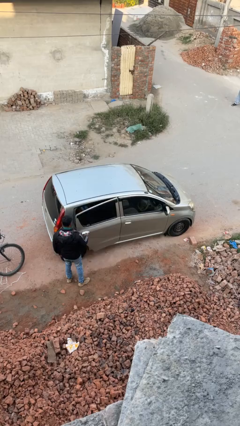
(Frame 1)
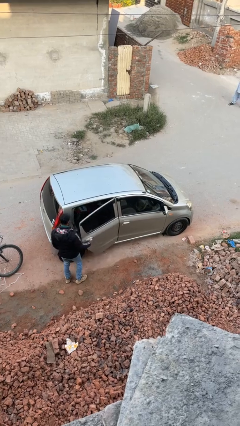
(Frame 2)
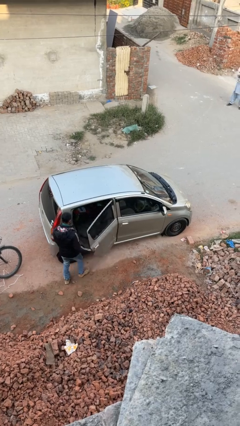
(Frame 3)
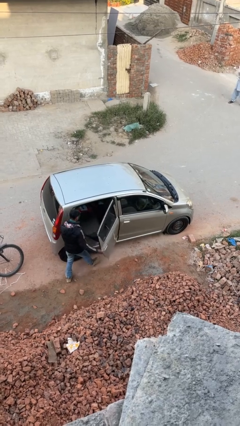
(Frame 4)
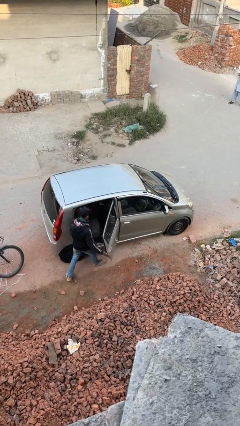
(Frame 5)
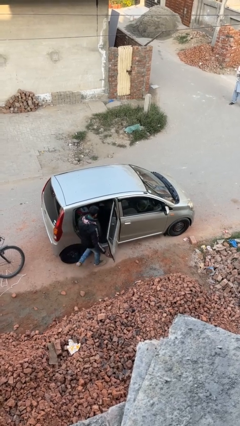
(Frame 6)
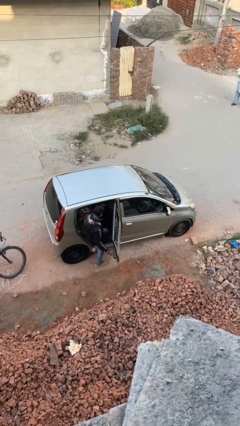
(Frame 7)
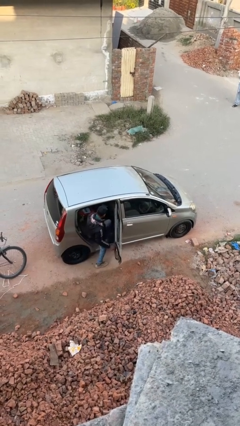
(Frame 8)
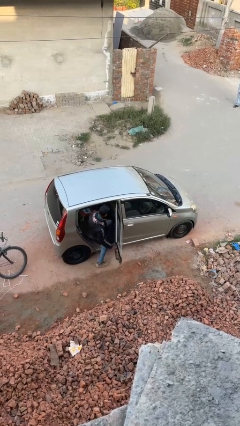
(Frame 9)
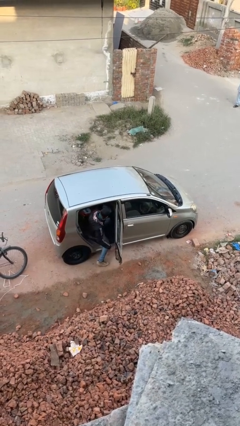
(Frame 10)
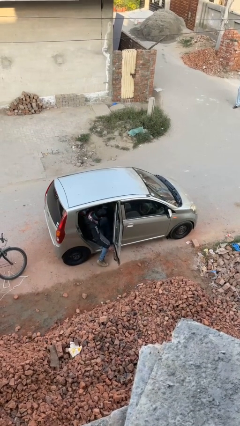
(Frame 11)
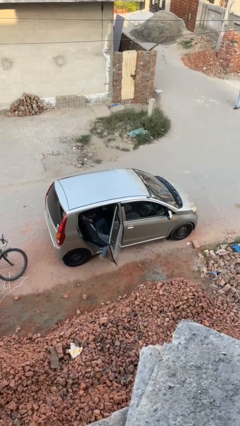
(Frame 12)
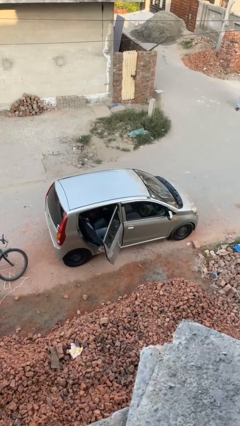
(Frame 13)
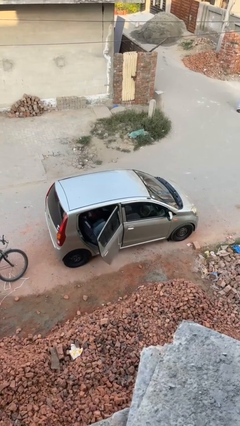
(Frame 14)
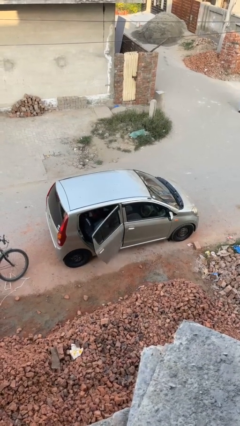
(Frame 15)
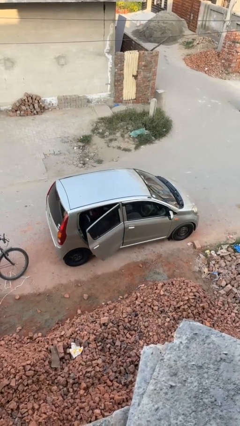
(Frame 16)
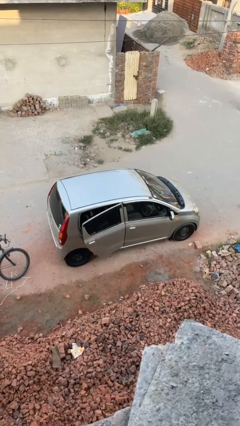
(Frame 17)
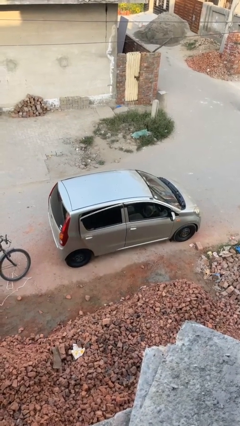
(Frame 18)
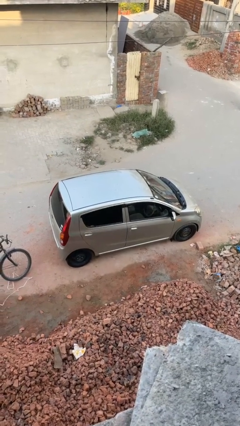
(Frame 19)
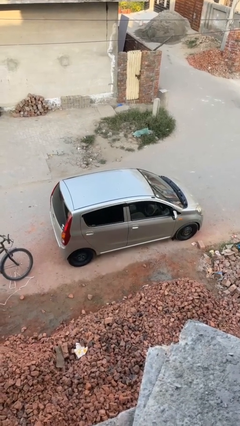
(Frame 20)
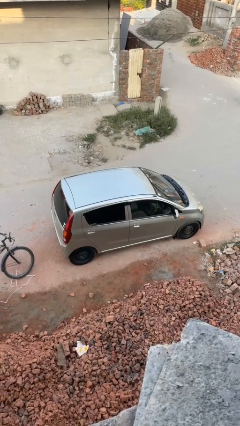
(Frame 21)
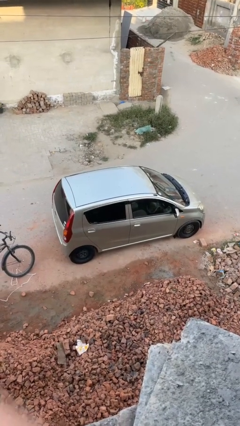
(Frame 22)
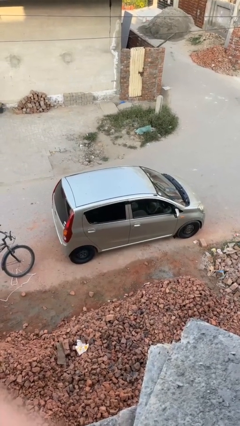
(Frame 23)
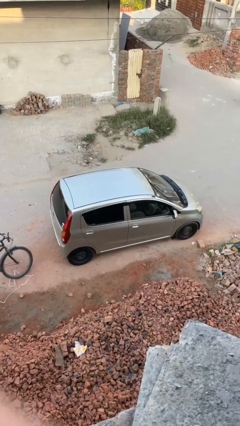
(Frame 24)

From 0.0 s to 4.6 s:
car picks up person

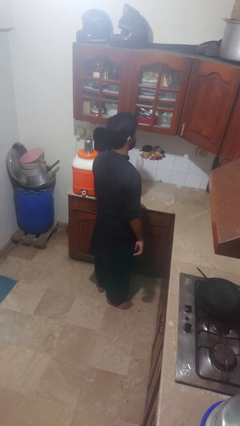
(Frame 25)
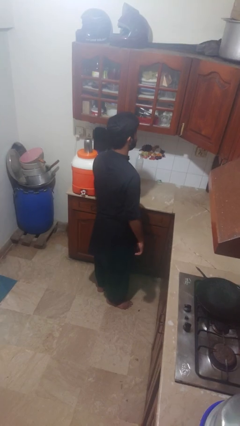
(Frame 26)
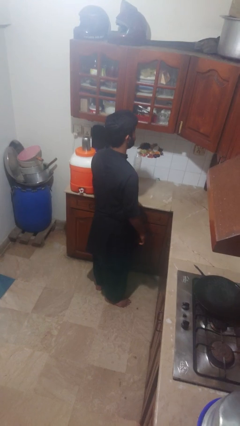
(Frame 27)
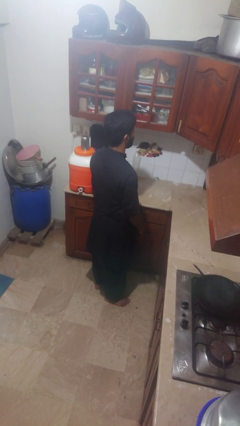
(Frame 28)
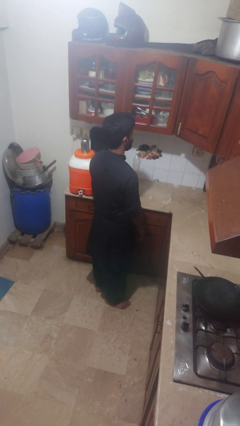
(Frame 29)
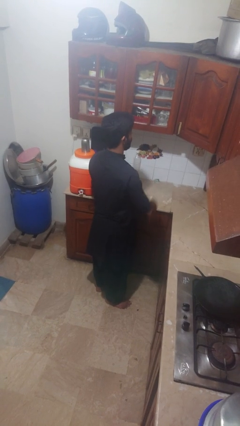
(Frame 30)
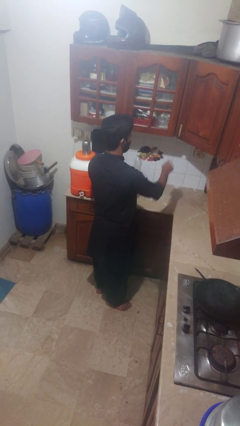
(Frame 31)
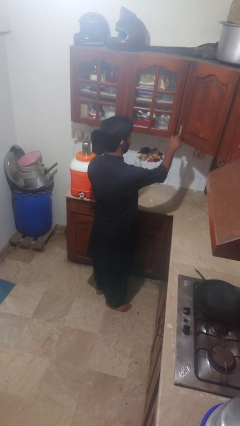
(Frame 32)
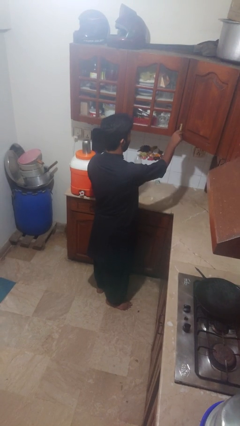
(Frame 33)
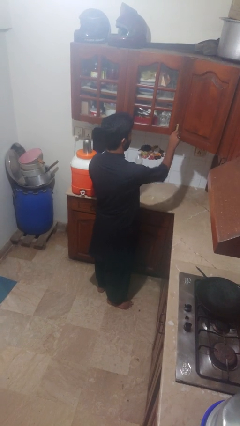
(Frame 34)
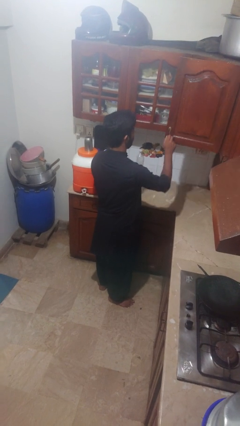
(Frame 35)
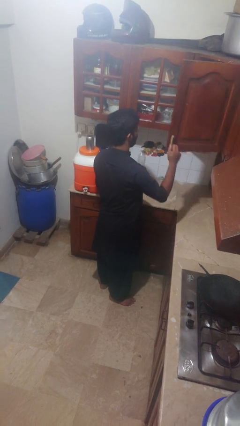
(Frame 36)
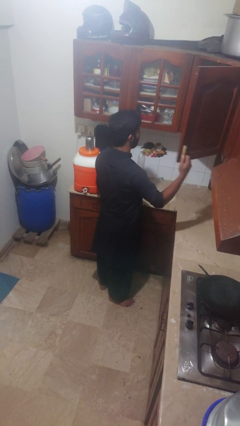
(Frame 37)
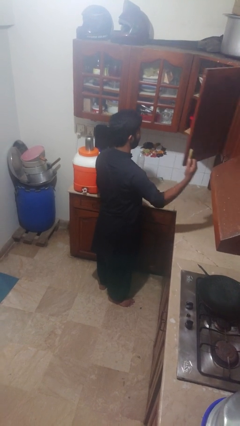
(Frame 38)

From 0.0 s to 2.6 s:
person opens cabinet

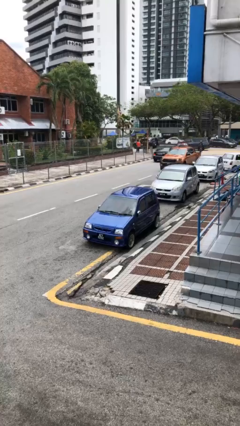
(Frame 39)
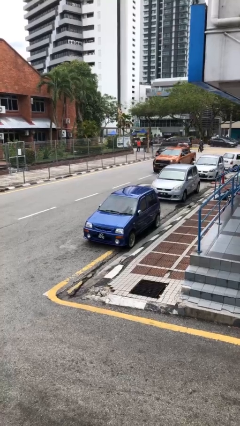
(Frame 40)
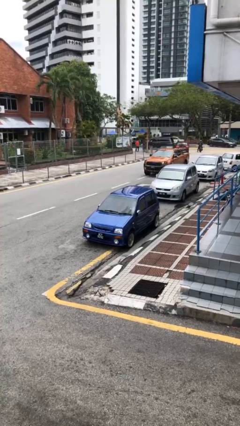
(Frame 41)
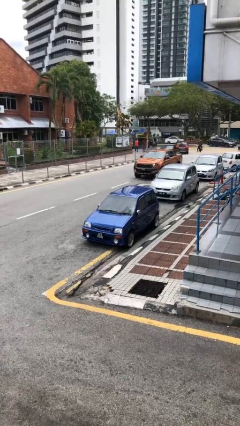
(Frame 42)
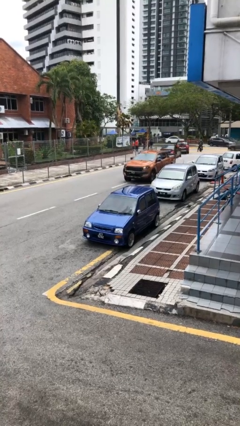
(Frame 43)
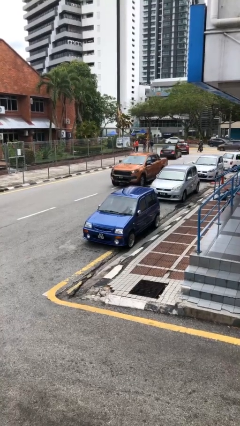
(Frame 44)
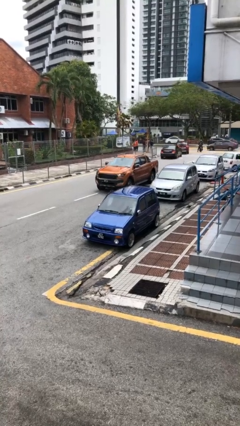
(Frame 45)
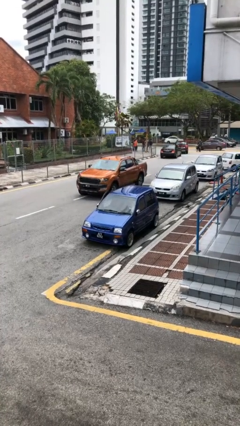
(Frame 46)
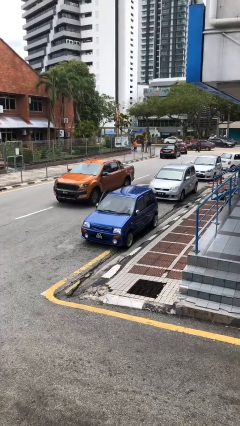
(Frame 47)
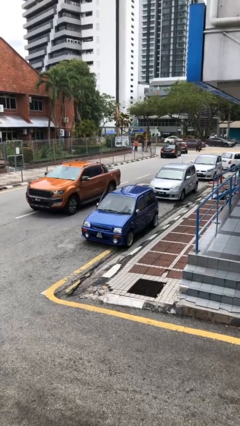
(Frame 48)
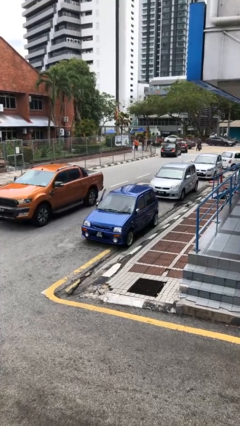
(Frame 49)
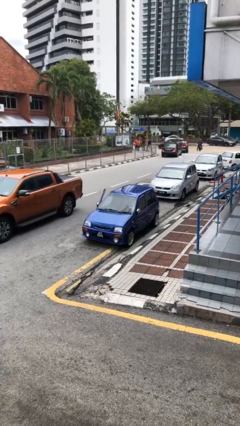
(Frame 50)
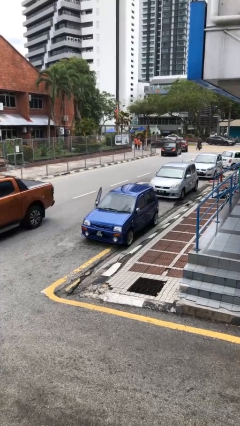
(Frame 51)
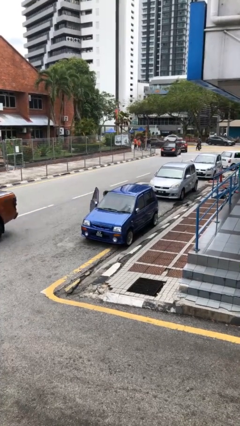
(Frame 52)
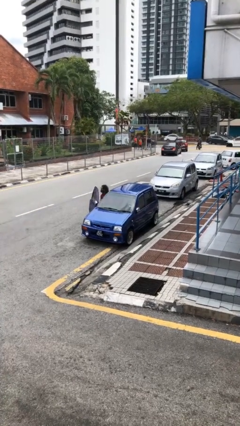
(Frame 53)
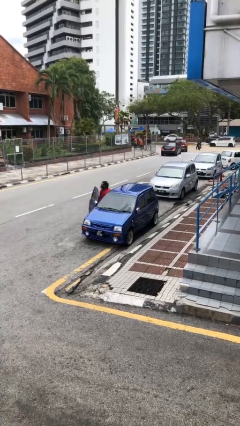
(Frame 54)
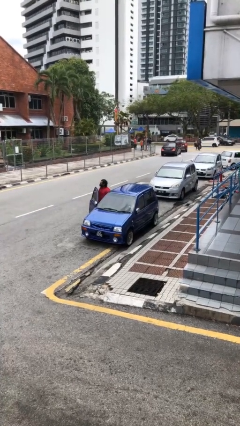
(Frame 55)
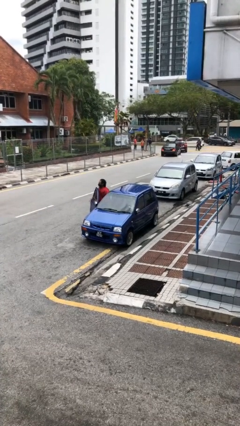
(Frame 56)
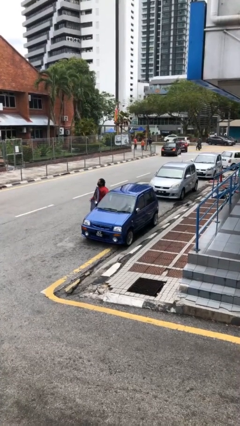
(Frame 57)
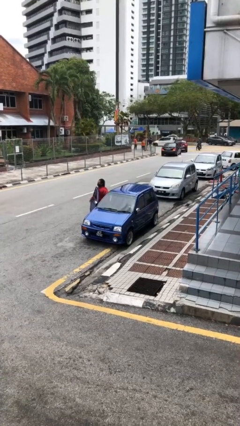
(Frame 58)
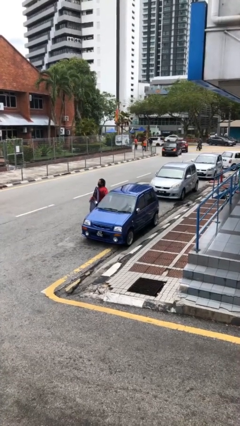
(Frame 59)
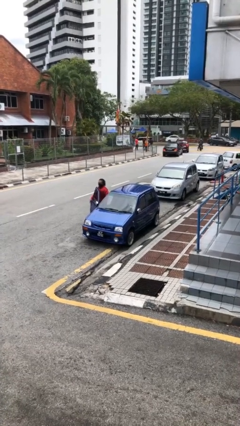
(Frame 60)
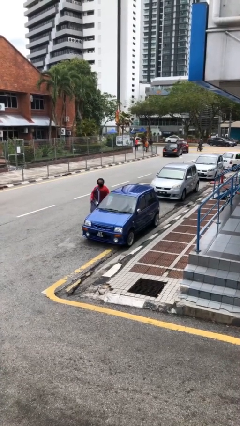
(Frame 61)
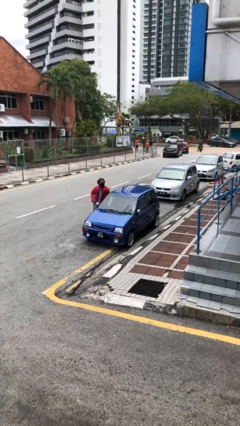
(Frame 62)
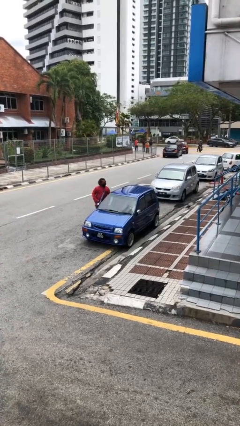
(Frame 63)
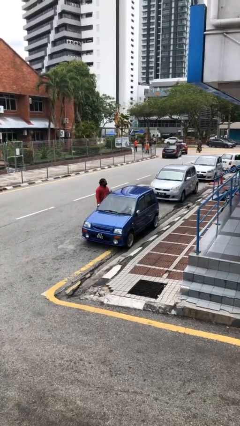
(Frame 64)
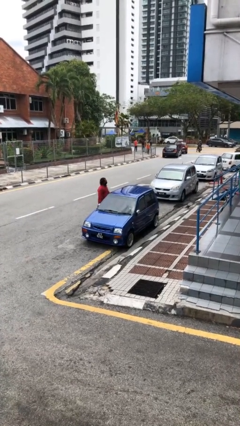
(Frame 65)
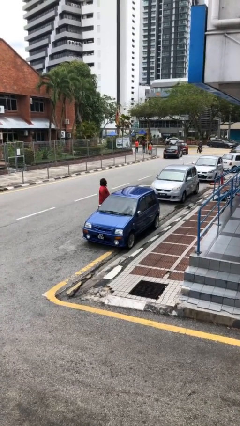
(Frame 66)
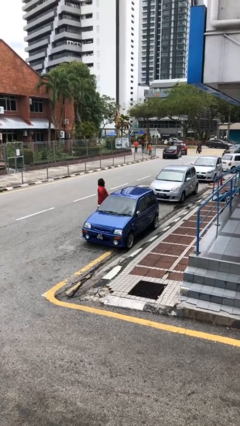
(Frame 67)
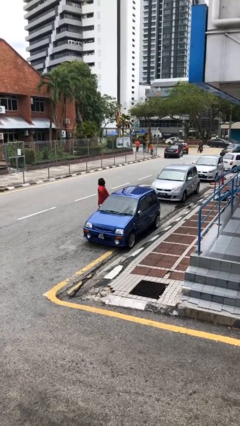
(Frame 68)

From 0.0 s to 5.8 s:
car drops off person

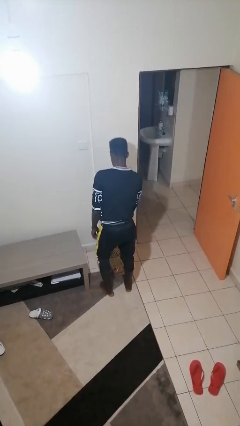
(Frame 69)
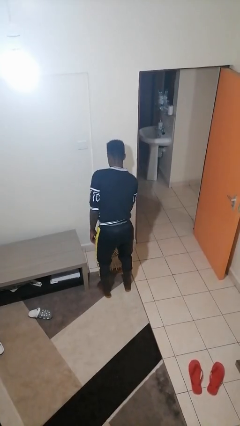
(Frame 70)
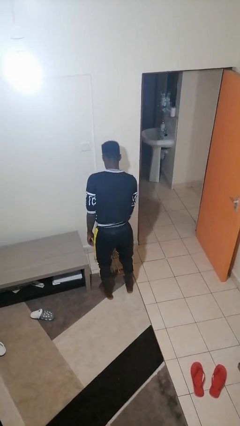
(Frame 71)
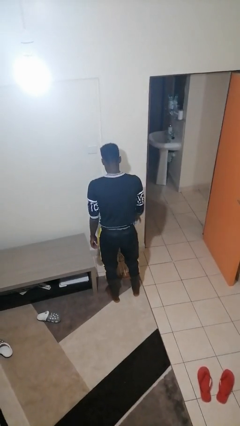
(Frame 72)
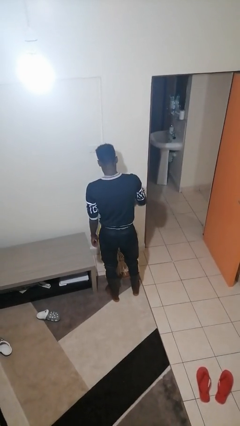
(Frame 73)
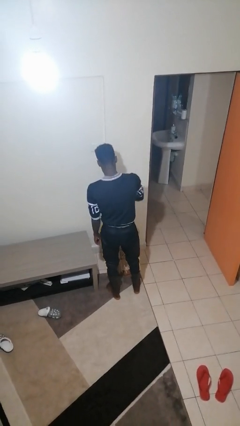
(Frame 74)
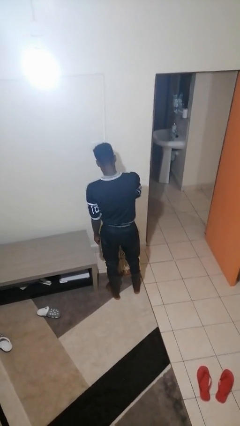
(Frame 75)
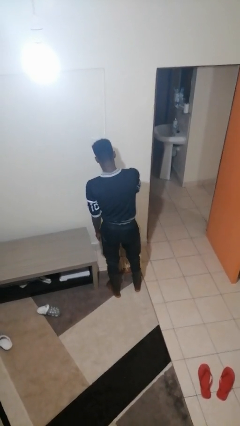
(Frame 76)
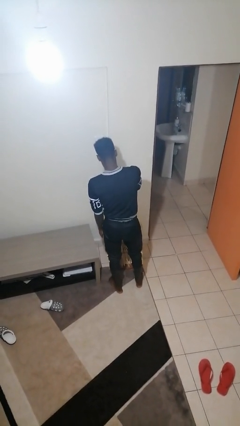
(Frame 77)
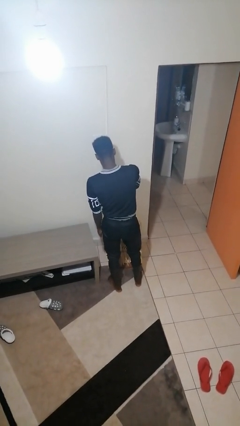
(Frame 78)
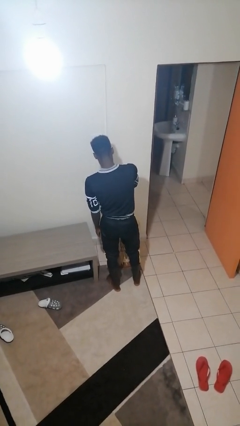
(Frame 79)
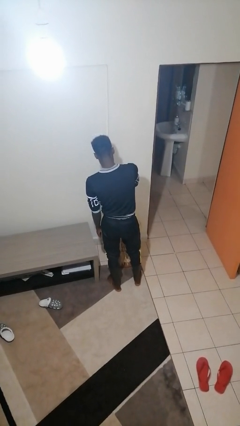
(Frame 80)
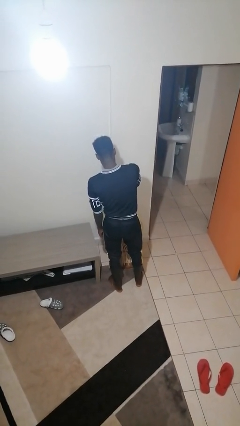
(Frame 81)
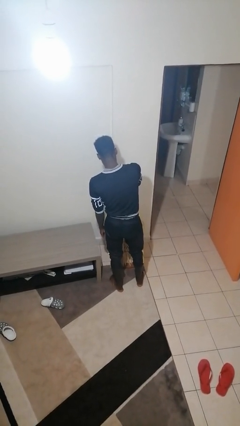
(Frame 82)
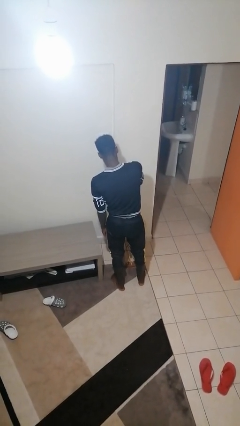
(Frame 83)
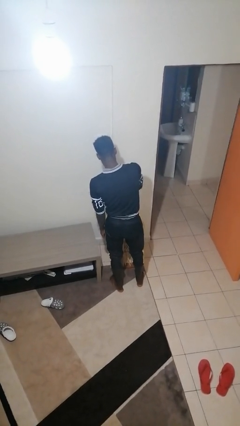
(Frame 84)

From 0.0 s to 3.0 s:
person waters houseplant

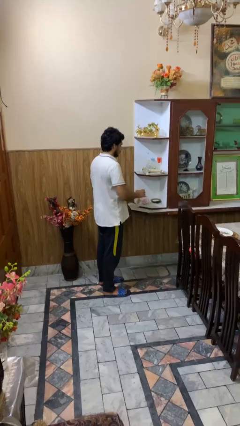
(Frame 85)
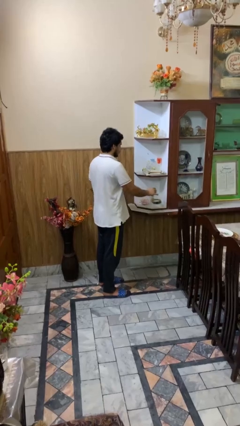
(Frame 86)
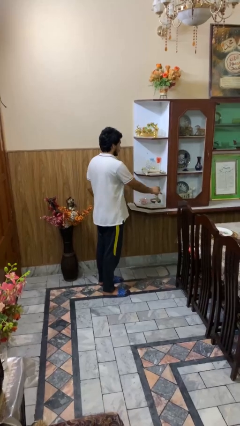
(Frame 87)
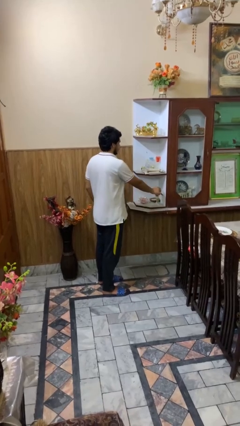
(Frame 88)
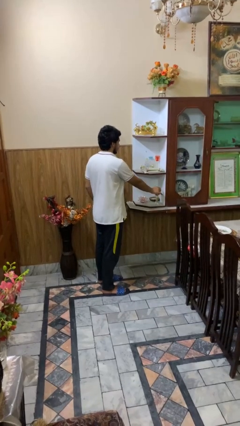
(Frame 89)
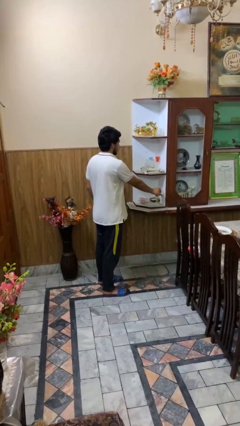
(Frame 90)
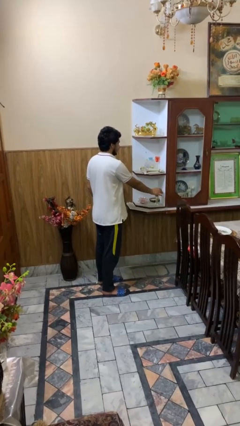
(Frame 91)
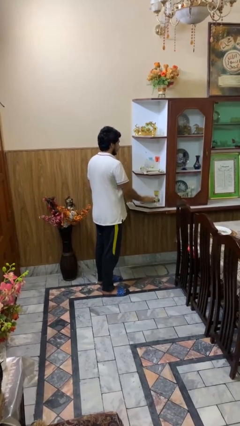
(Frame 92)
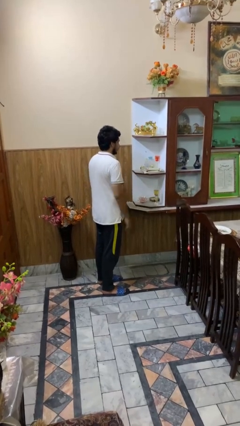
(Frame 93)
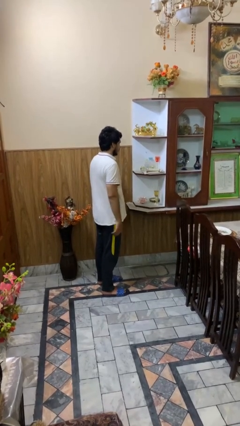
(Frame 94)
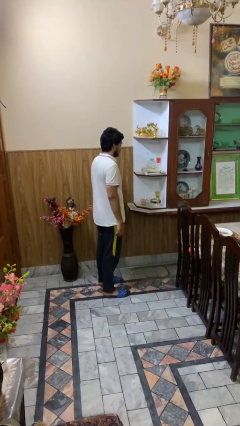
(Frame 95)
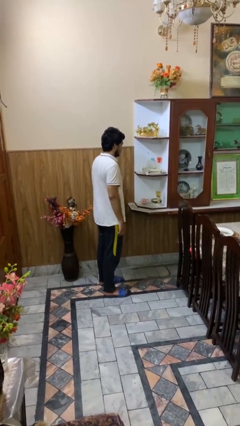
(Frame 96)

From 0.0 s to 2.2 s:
person puts down object into cabinet
